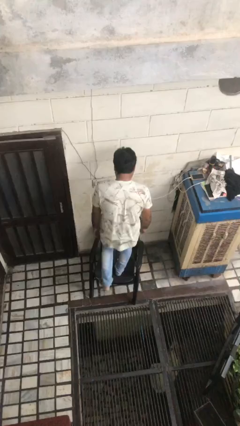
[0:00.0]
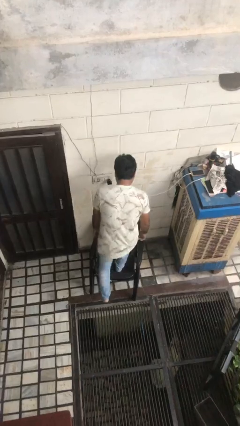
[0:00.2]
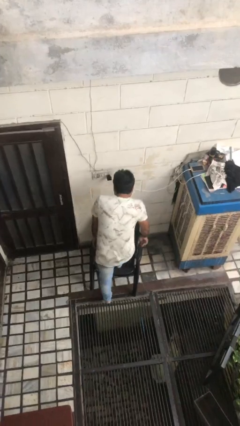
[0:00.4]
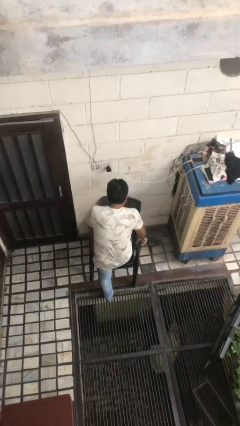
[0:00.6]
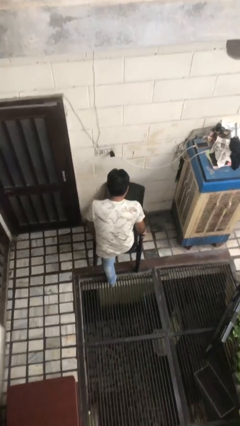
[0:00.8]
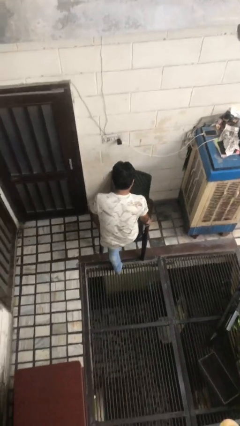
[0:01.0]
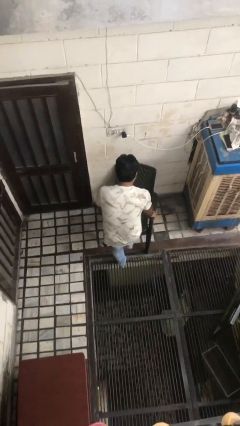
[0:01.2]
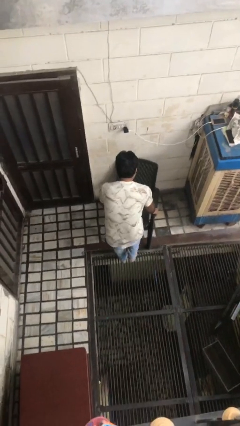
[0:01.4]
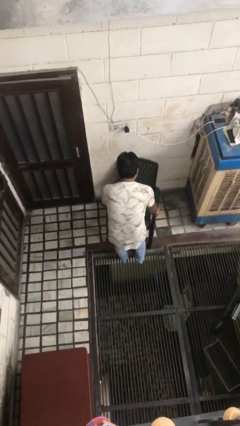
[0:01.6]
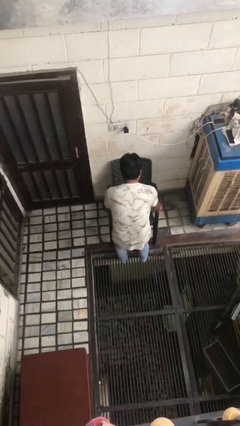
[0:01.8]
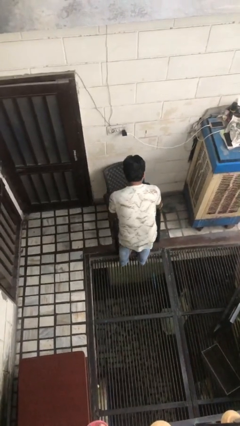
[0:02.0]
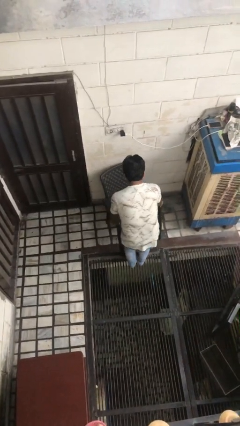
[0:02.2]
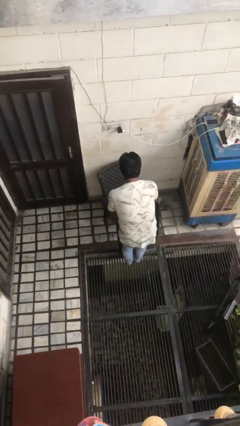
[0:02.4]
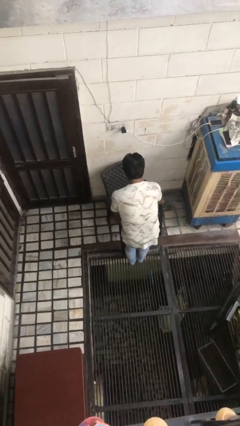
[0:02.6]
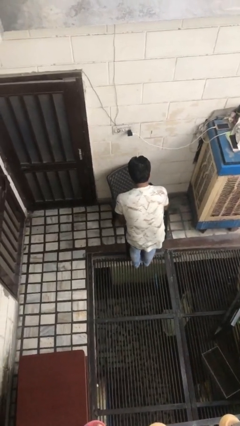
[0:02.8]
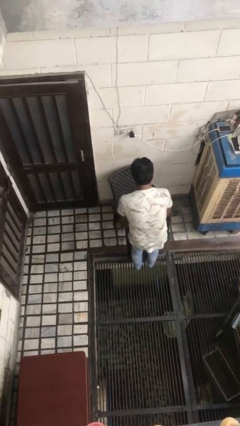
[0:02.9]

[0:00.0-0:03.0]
person climbs off chair

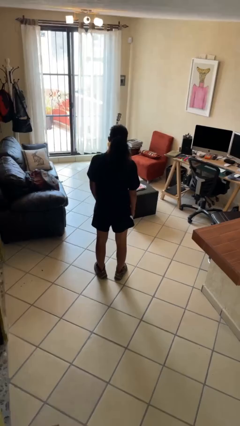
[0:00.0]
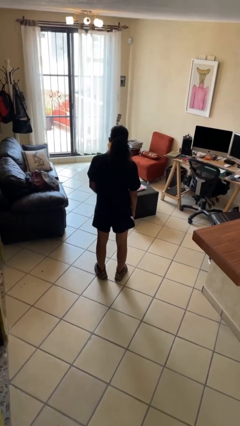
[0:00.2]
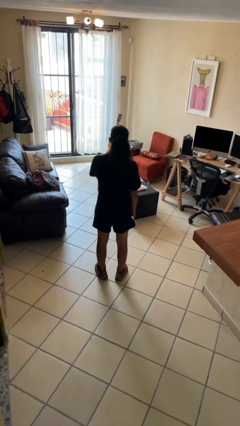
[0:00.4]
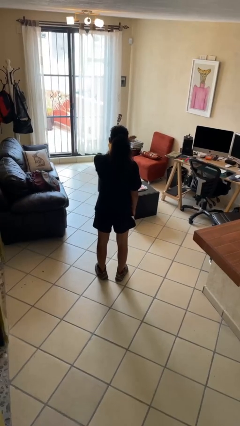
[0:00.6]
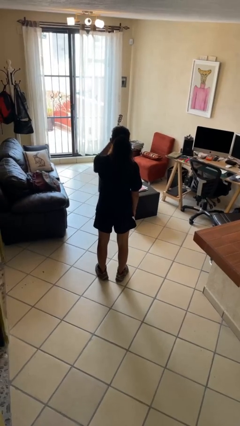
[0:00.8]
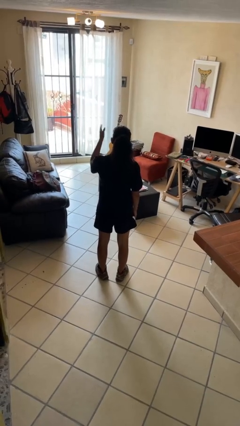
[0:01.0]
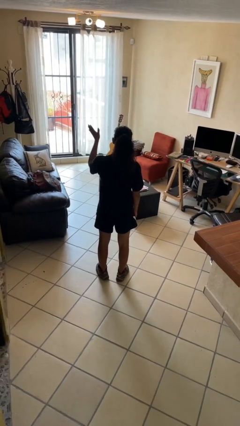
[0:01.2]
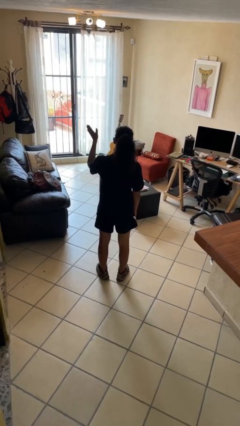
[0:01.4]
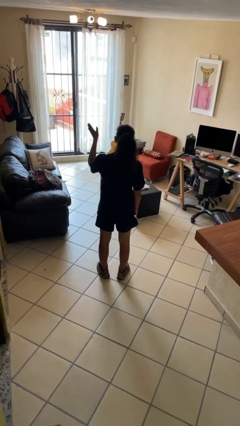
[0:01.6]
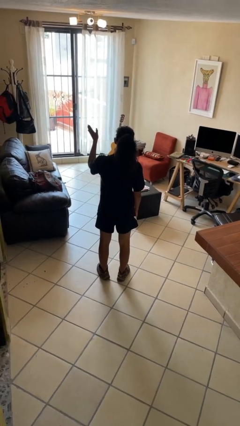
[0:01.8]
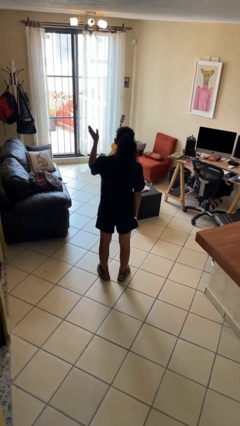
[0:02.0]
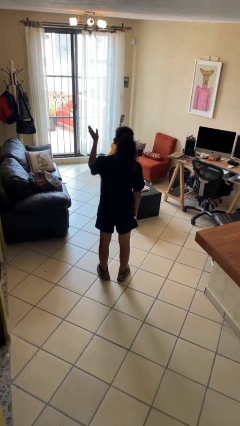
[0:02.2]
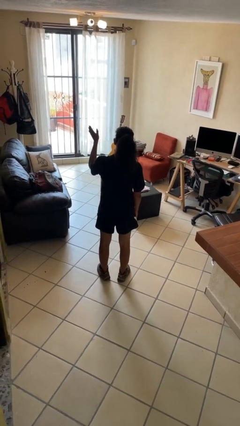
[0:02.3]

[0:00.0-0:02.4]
person gestures swipe left

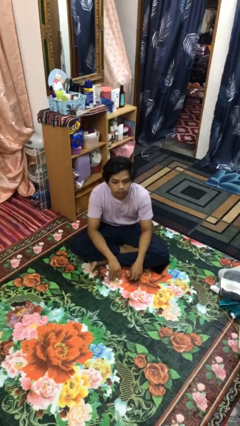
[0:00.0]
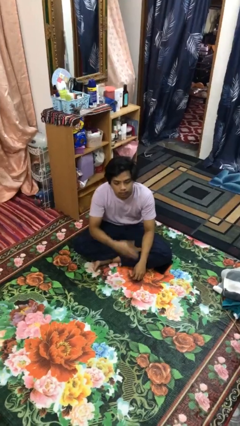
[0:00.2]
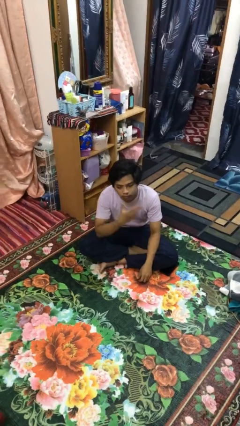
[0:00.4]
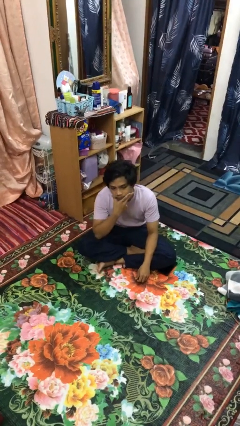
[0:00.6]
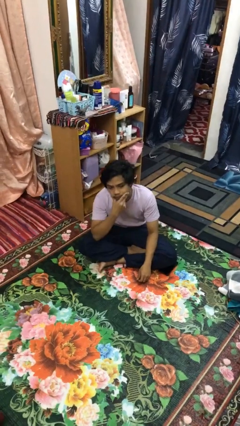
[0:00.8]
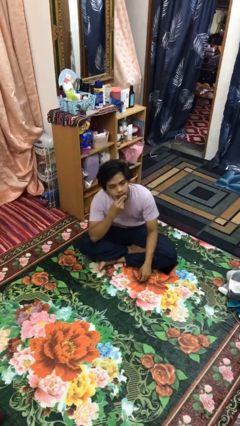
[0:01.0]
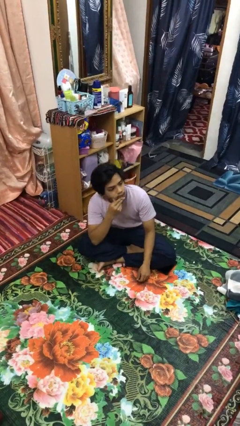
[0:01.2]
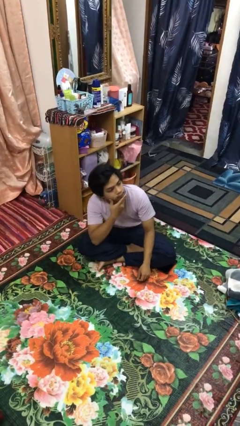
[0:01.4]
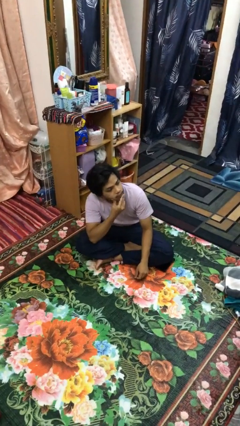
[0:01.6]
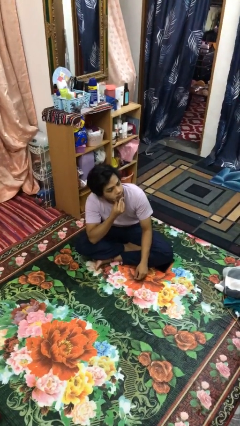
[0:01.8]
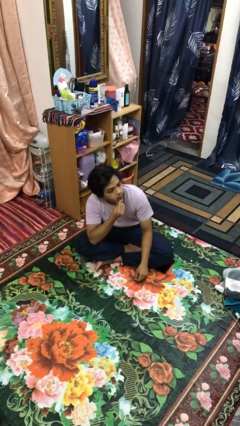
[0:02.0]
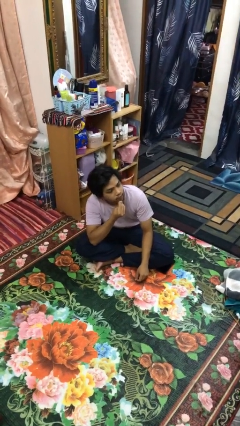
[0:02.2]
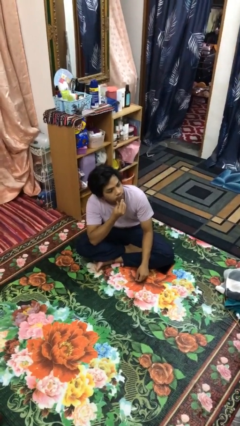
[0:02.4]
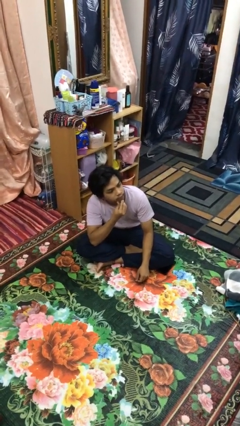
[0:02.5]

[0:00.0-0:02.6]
person strokes chin

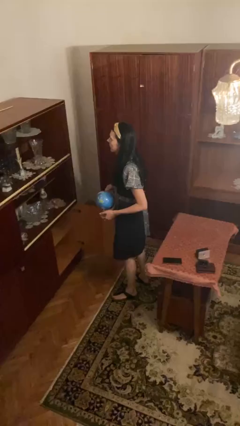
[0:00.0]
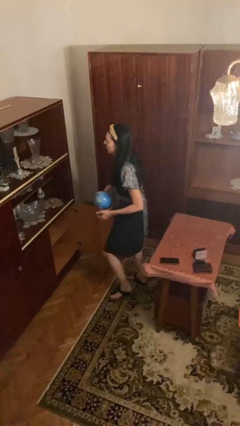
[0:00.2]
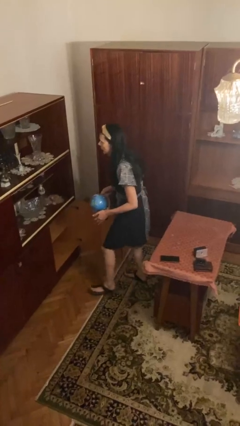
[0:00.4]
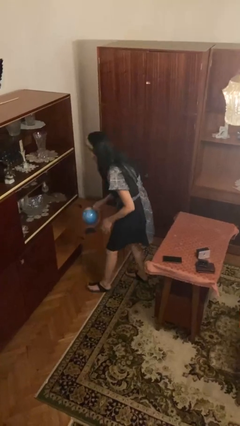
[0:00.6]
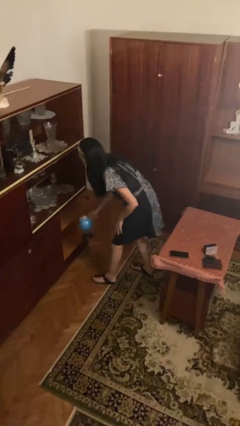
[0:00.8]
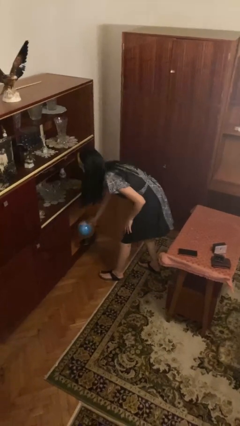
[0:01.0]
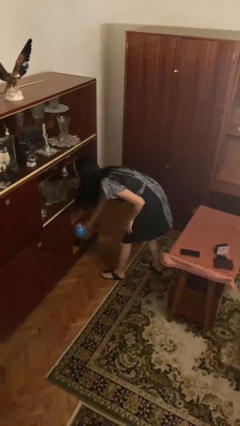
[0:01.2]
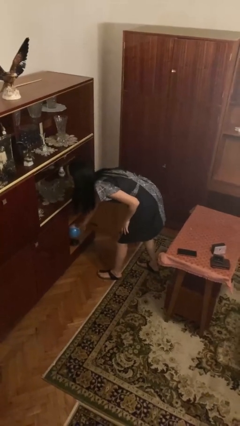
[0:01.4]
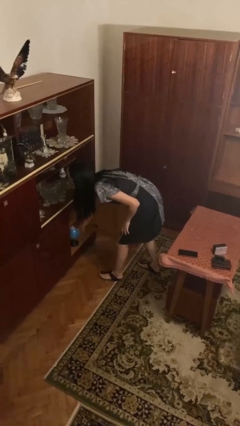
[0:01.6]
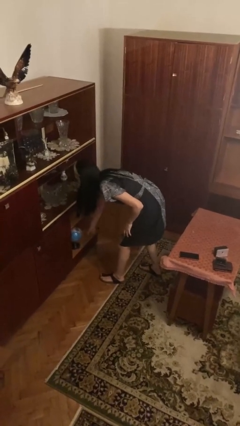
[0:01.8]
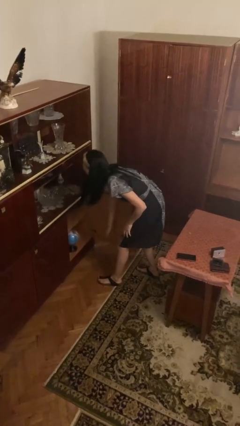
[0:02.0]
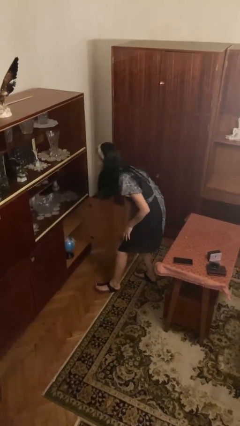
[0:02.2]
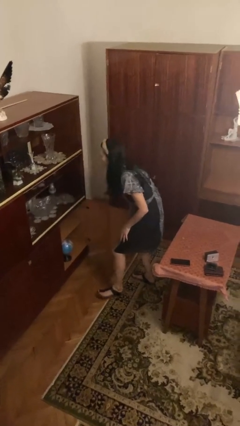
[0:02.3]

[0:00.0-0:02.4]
person puts down object into cabinet

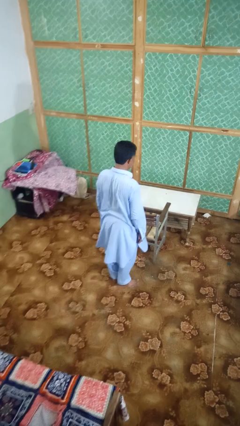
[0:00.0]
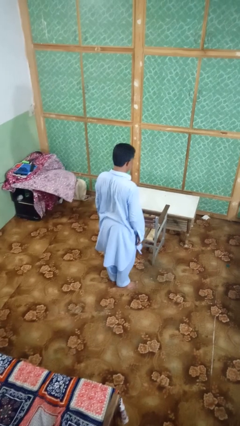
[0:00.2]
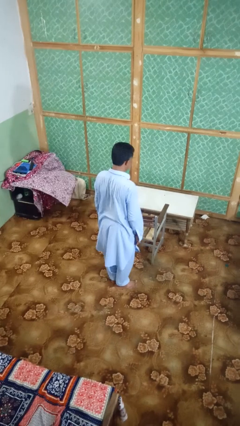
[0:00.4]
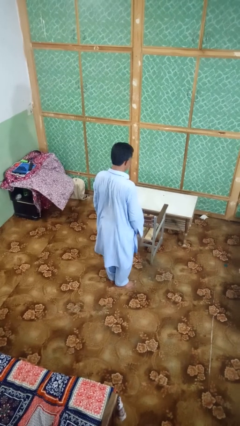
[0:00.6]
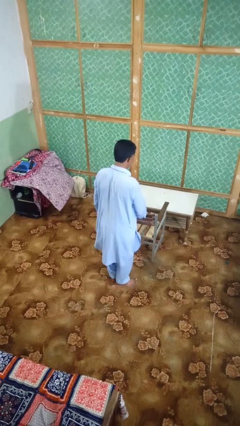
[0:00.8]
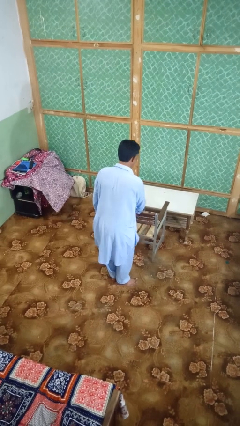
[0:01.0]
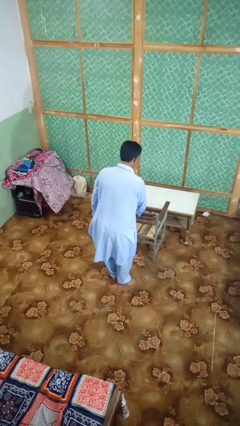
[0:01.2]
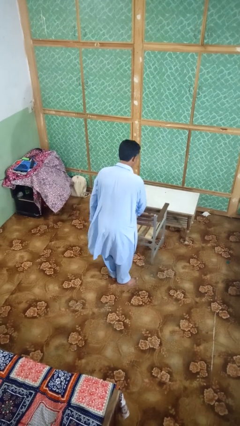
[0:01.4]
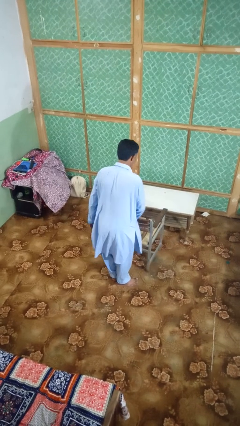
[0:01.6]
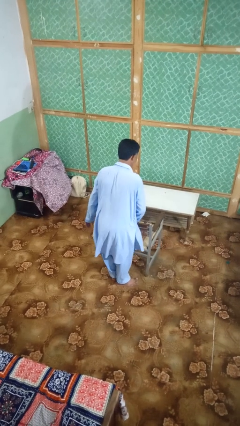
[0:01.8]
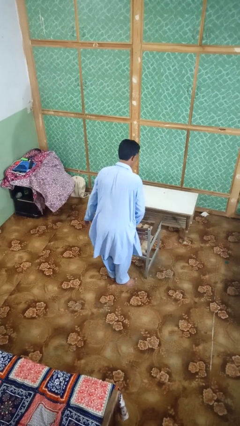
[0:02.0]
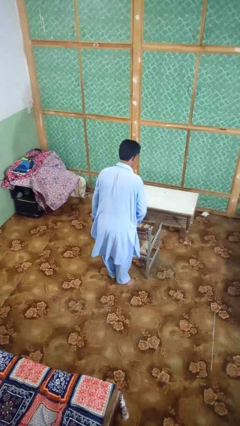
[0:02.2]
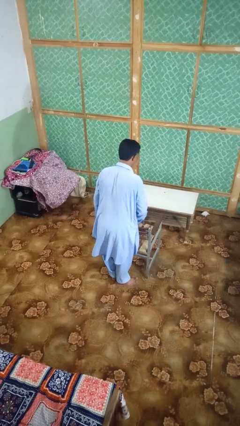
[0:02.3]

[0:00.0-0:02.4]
person pulls out chair

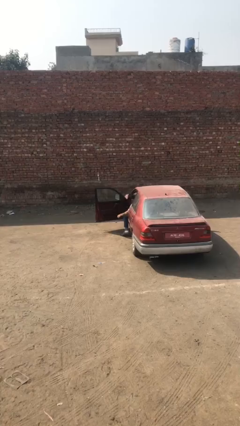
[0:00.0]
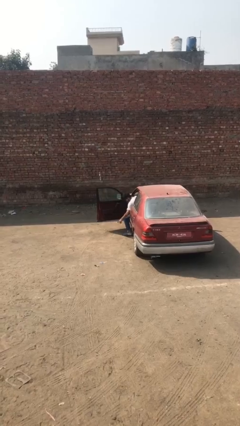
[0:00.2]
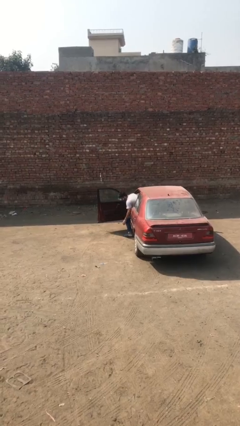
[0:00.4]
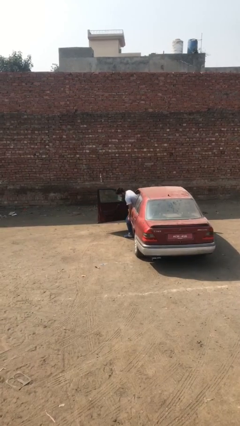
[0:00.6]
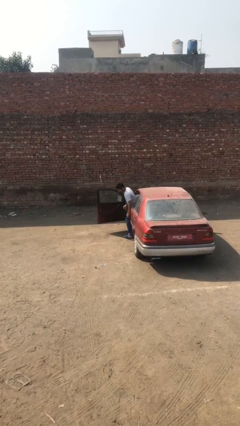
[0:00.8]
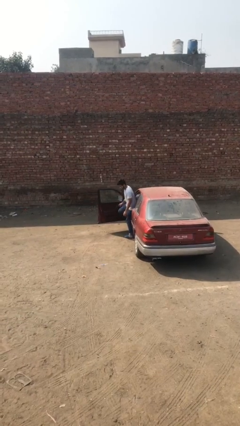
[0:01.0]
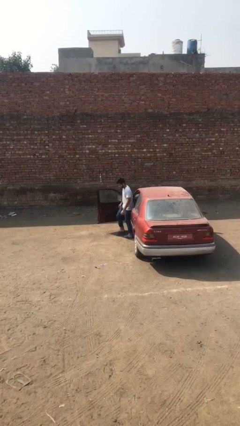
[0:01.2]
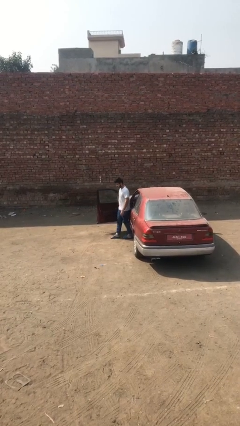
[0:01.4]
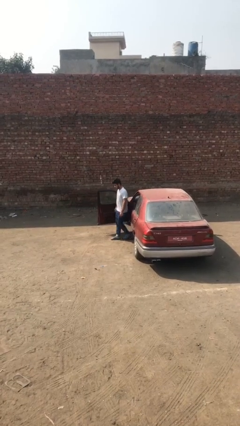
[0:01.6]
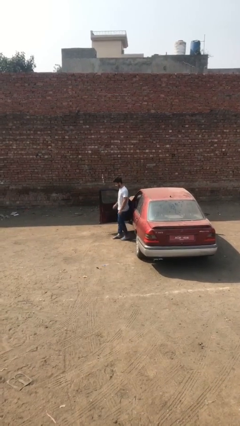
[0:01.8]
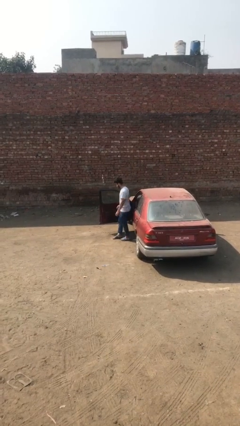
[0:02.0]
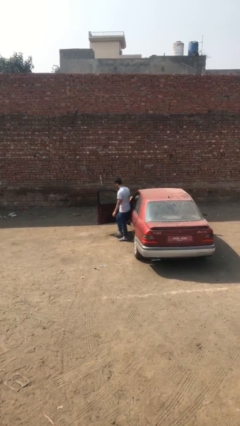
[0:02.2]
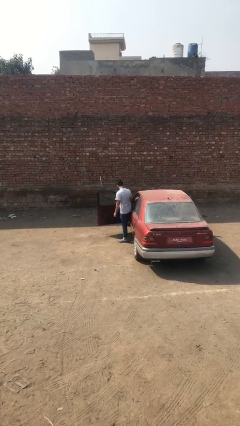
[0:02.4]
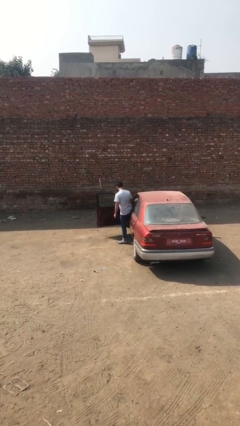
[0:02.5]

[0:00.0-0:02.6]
person exits car

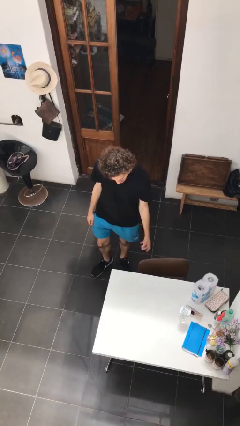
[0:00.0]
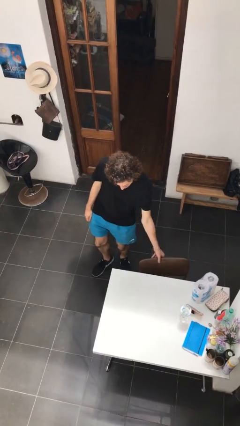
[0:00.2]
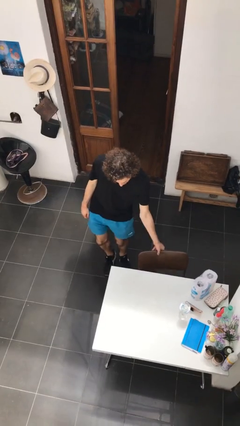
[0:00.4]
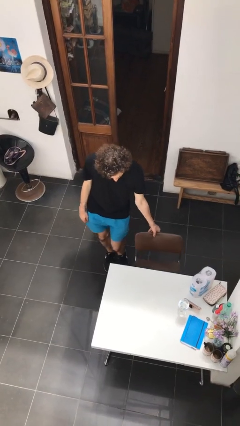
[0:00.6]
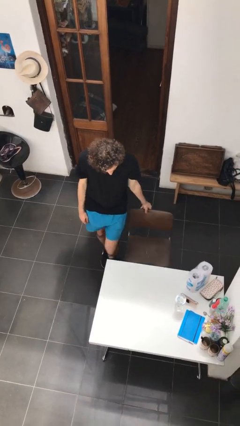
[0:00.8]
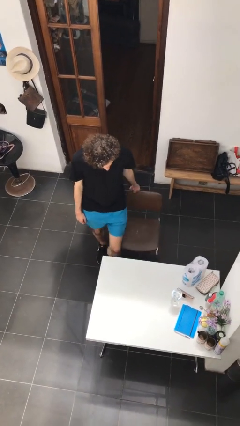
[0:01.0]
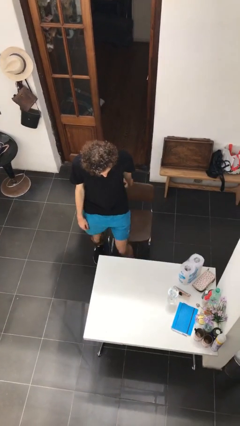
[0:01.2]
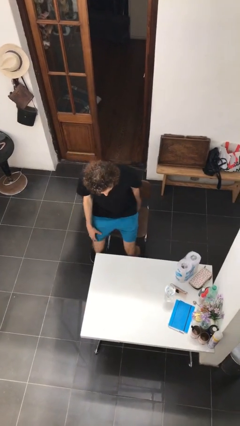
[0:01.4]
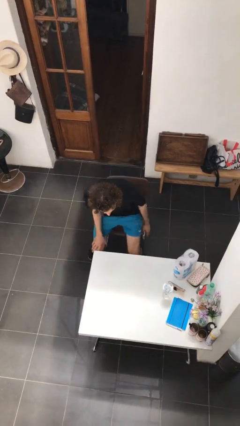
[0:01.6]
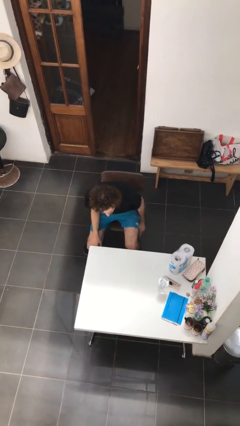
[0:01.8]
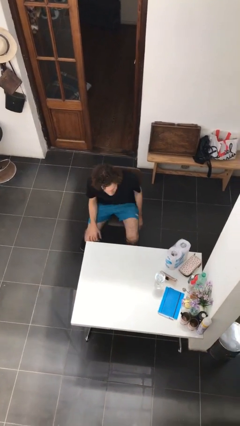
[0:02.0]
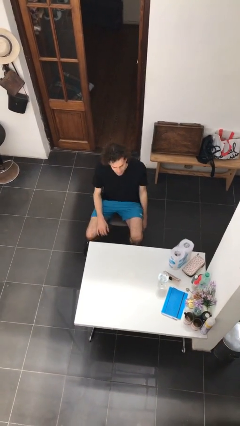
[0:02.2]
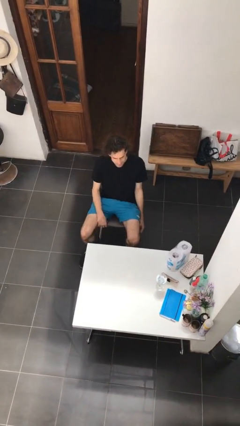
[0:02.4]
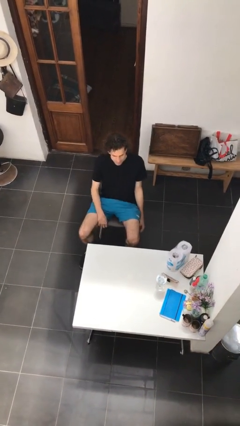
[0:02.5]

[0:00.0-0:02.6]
person sits down
